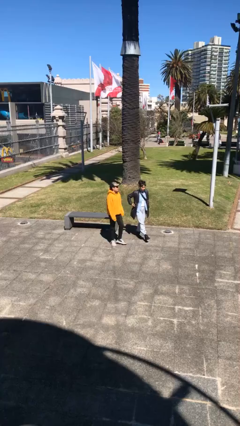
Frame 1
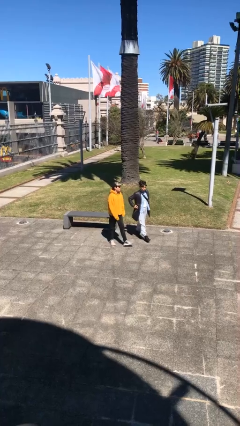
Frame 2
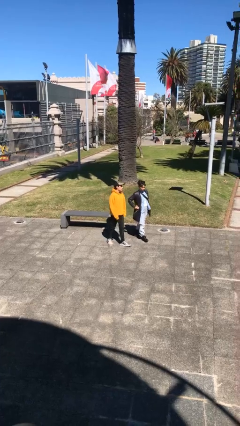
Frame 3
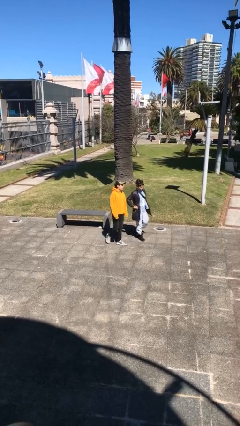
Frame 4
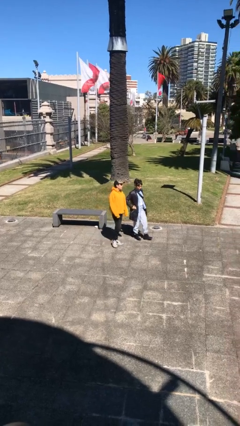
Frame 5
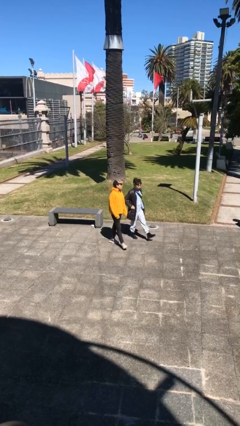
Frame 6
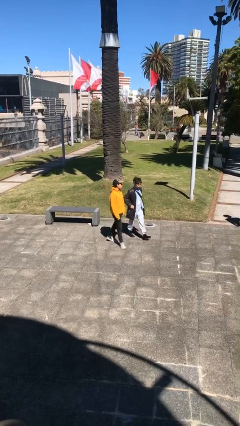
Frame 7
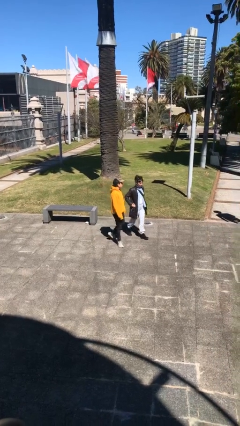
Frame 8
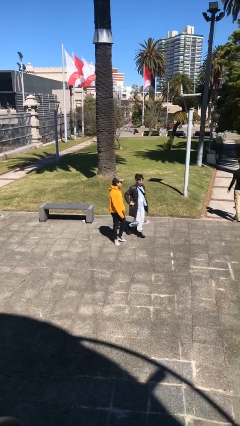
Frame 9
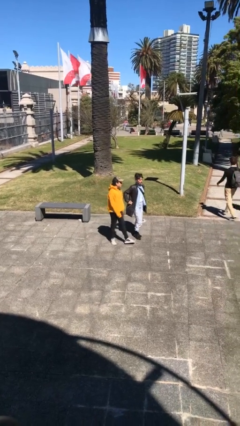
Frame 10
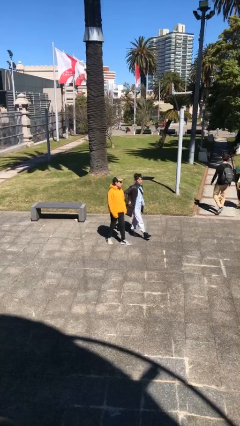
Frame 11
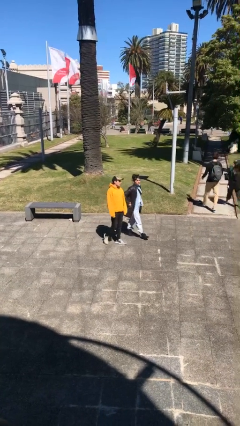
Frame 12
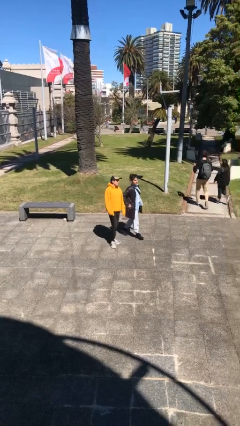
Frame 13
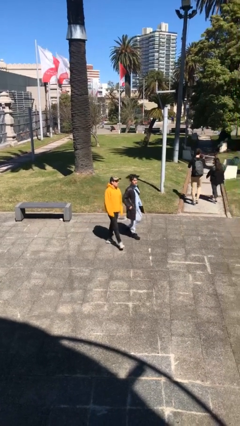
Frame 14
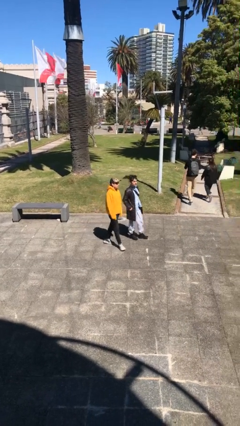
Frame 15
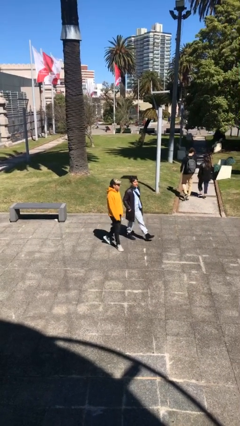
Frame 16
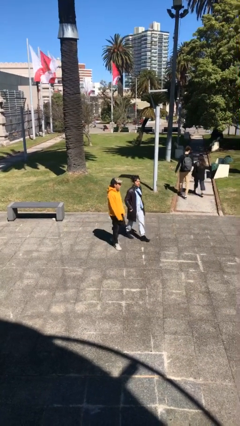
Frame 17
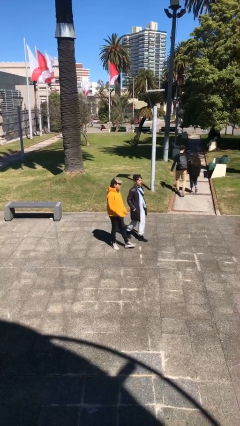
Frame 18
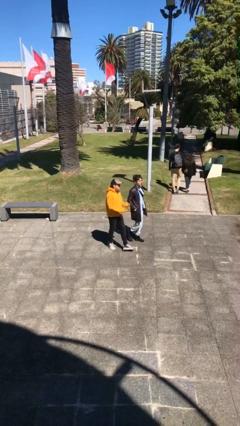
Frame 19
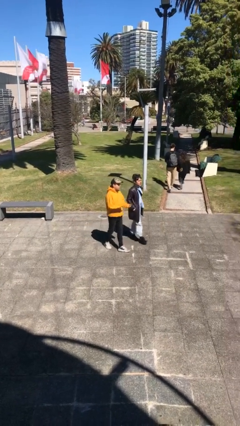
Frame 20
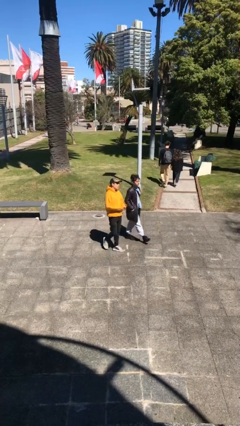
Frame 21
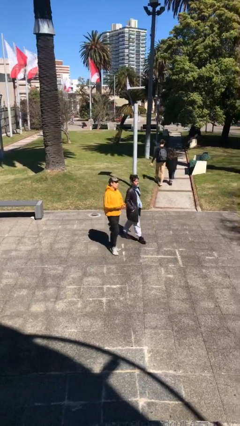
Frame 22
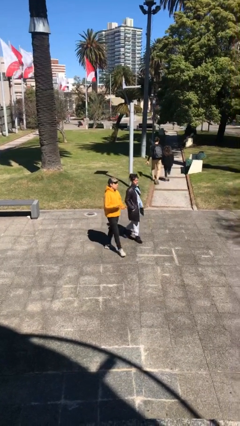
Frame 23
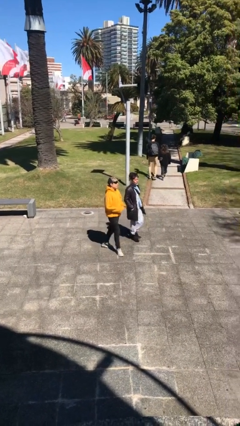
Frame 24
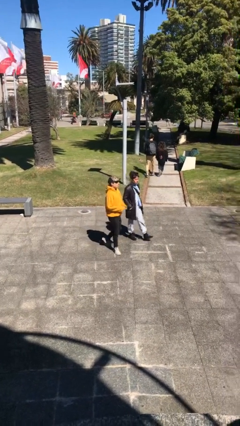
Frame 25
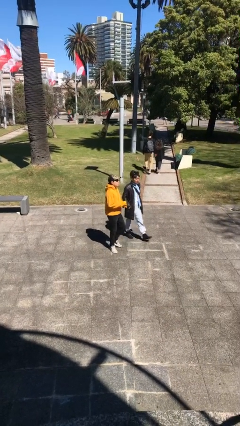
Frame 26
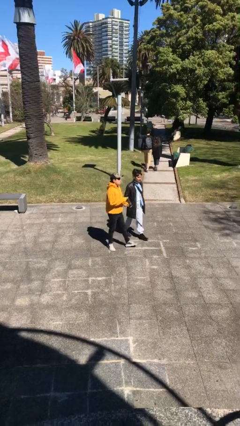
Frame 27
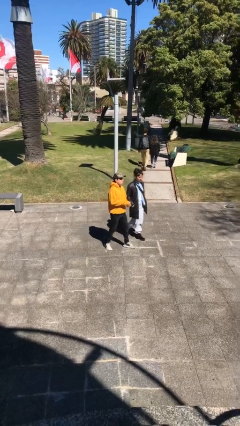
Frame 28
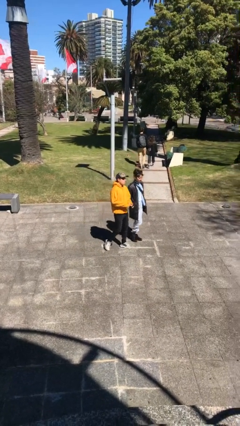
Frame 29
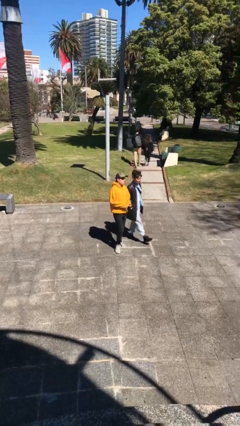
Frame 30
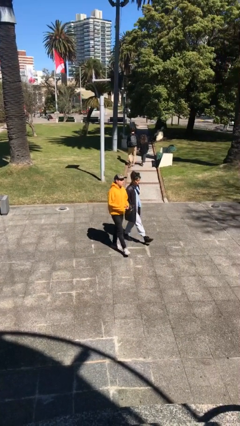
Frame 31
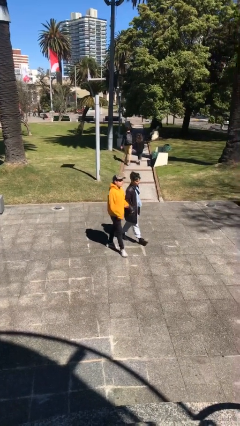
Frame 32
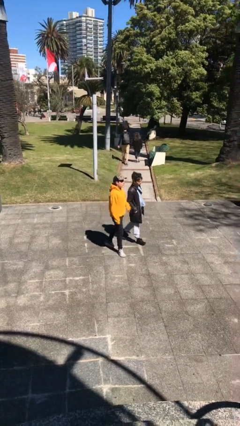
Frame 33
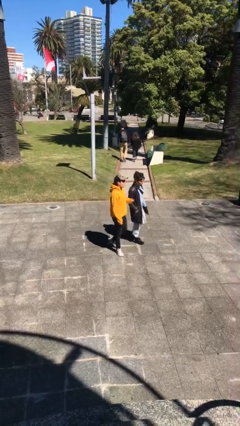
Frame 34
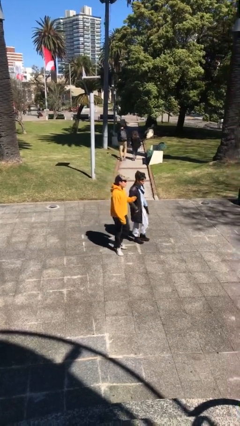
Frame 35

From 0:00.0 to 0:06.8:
person talks to person

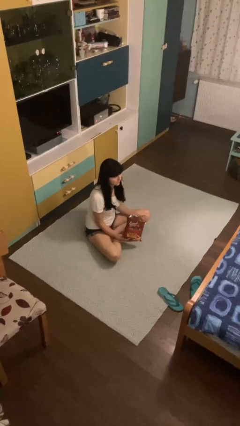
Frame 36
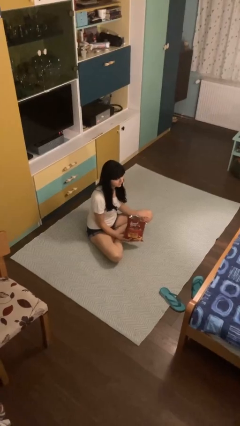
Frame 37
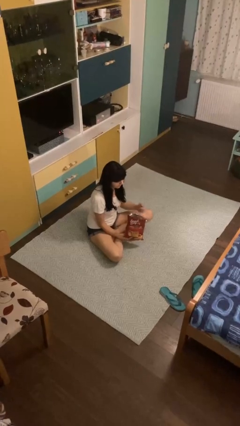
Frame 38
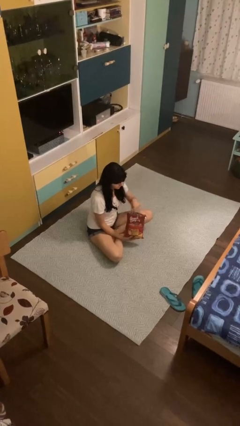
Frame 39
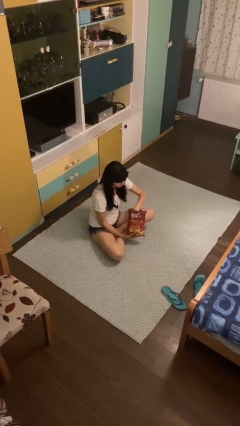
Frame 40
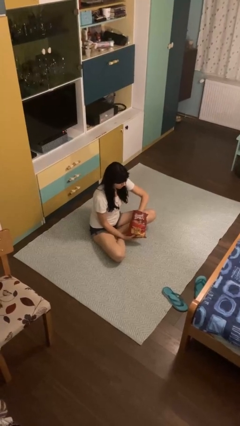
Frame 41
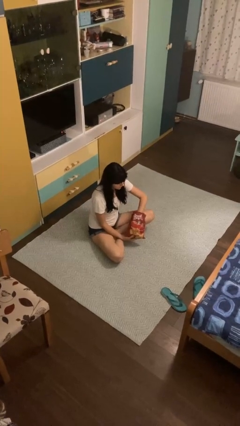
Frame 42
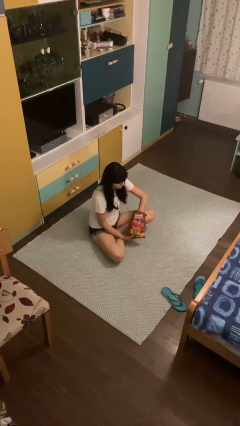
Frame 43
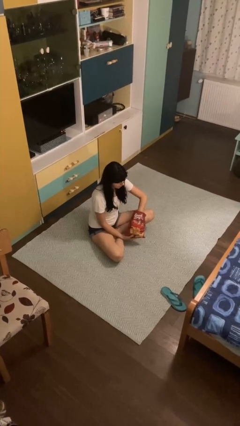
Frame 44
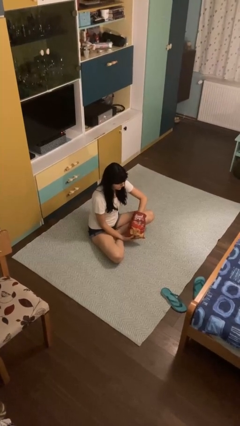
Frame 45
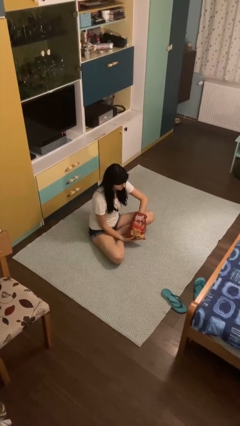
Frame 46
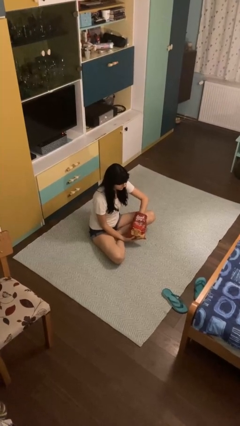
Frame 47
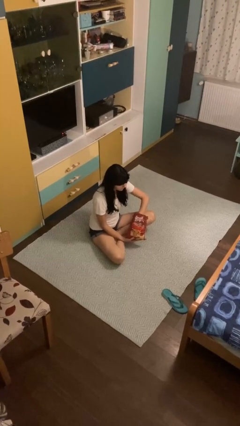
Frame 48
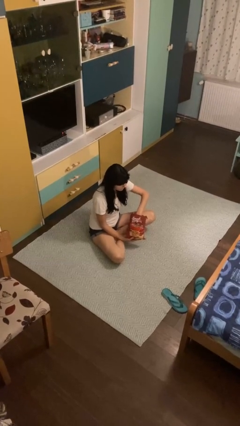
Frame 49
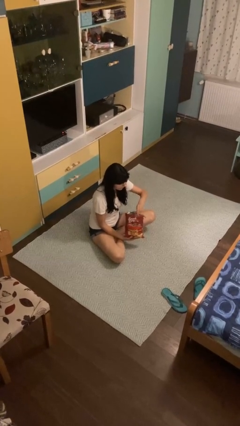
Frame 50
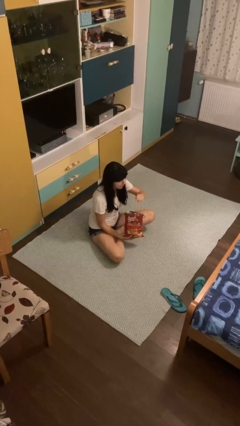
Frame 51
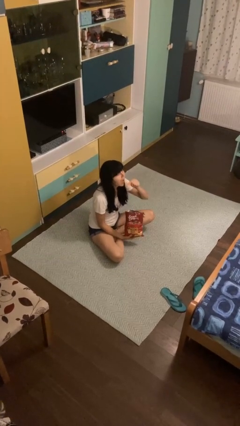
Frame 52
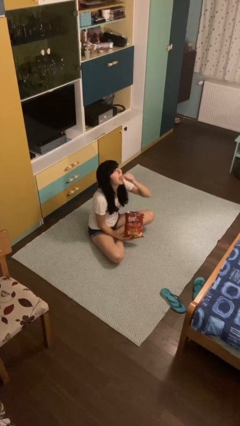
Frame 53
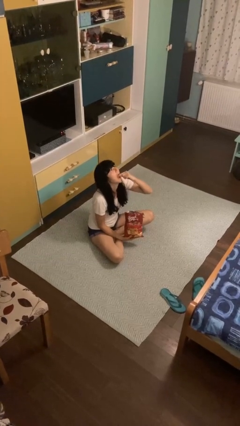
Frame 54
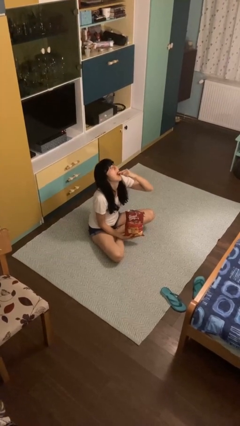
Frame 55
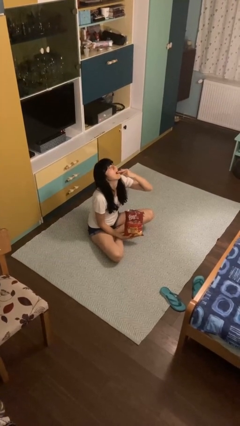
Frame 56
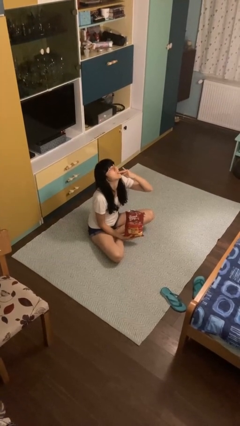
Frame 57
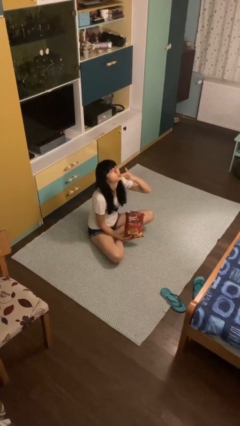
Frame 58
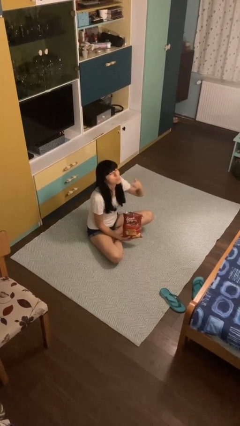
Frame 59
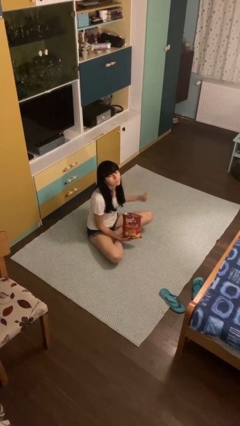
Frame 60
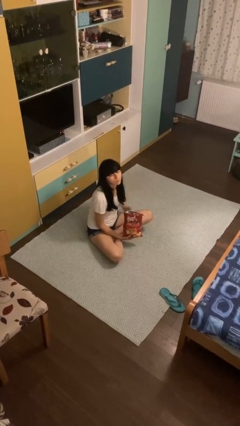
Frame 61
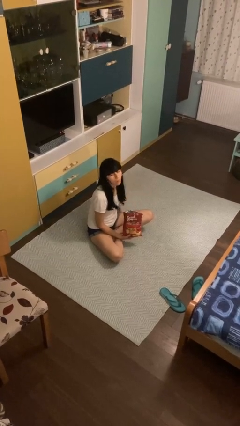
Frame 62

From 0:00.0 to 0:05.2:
person eats snack from bag

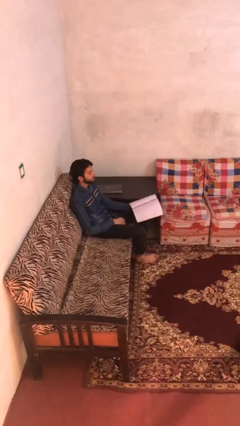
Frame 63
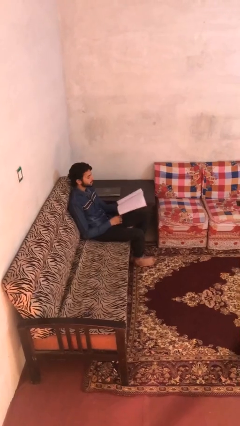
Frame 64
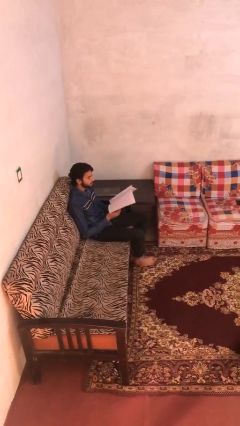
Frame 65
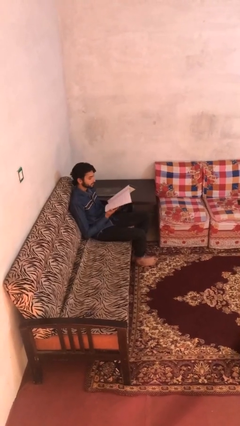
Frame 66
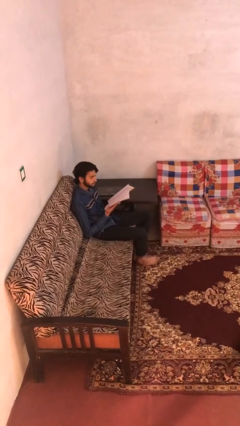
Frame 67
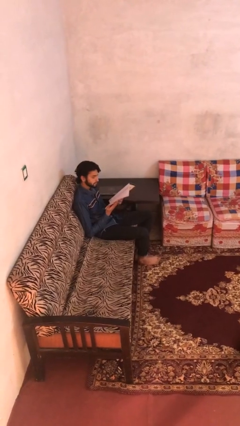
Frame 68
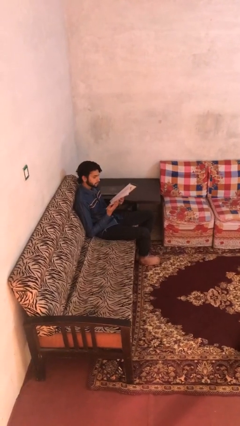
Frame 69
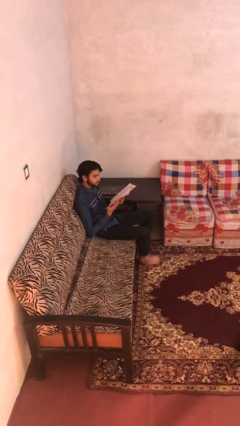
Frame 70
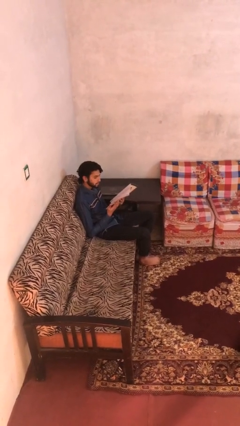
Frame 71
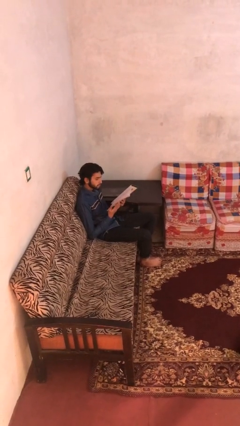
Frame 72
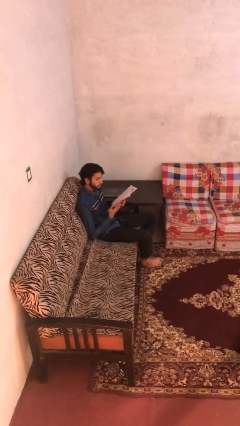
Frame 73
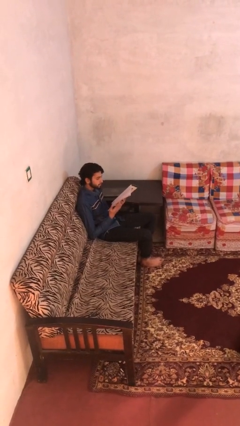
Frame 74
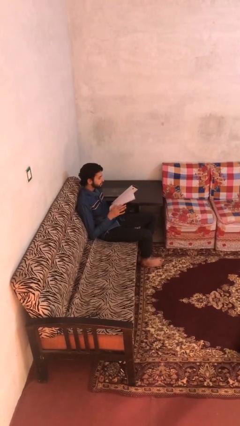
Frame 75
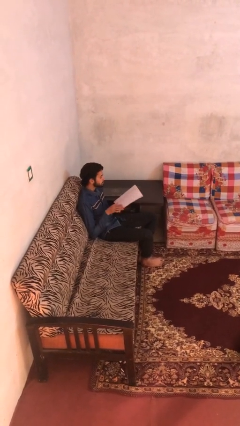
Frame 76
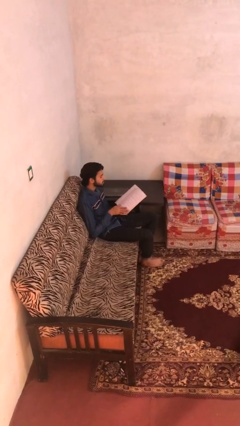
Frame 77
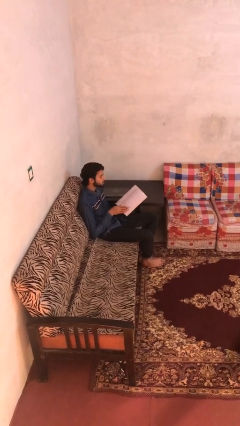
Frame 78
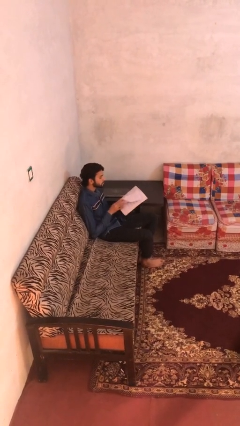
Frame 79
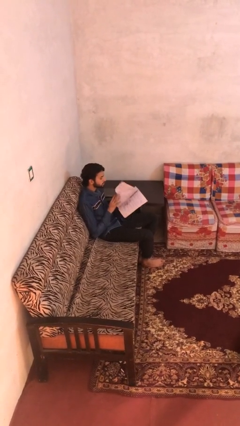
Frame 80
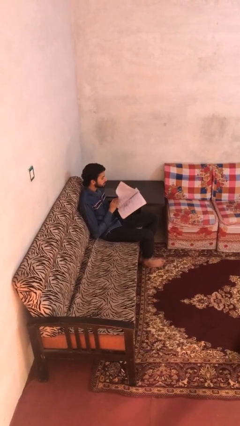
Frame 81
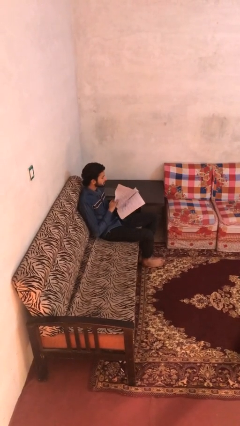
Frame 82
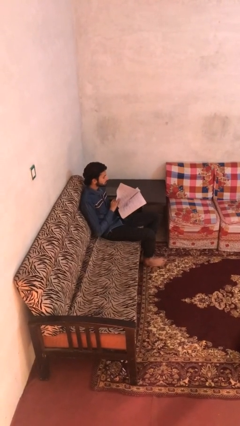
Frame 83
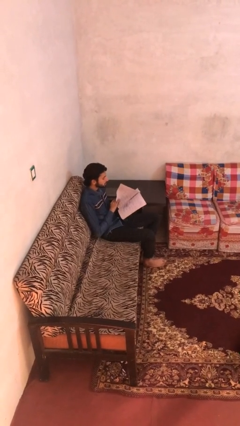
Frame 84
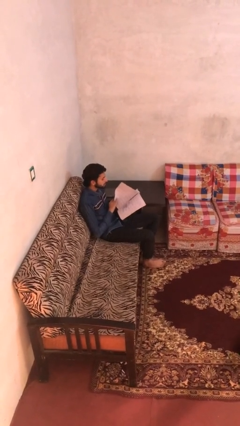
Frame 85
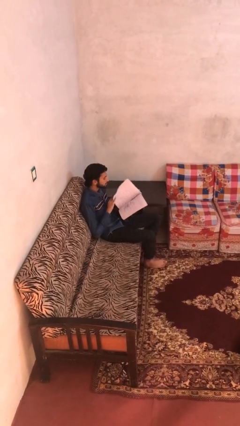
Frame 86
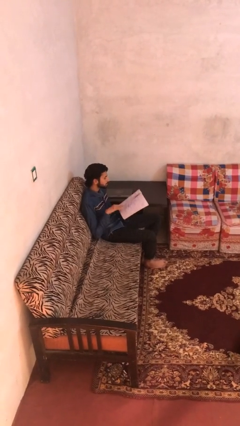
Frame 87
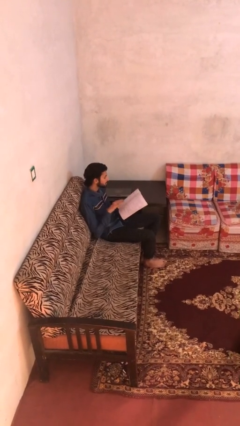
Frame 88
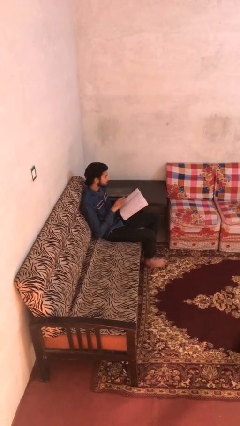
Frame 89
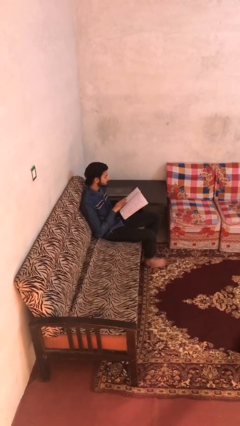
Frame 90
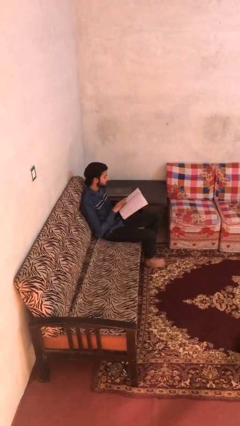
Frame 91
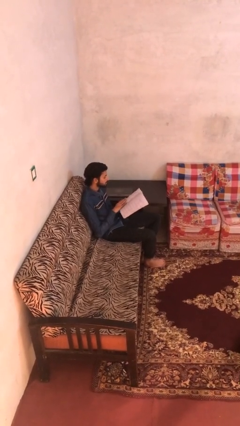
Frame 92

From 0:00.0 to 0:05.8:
person reads document
